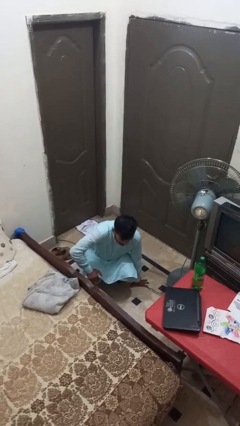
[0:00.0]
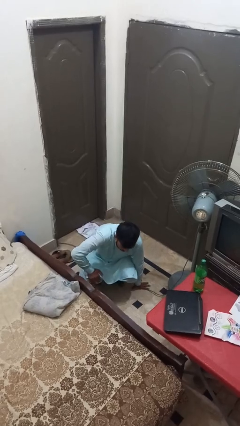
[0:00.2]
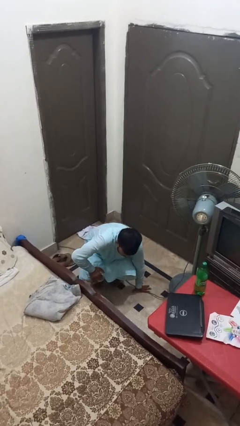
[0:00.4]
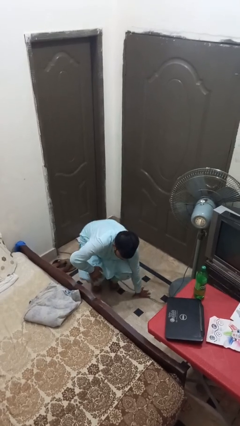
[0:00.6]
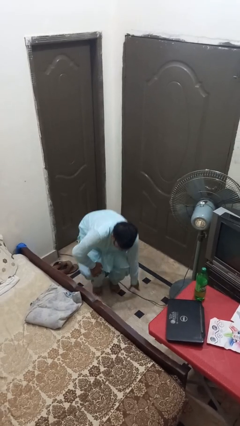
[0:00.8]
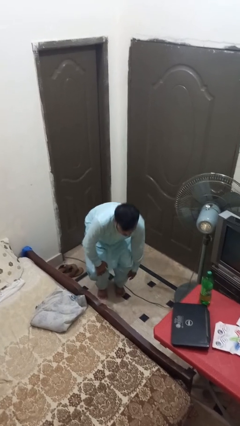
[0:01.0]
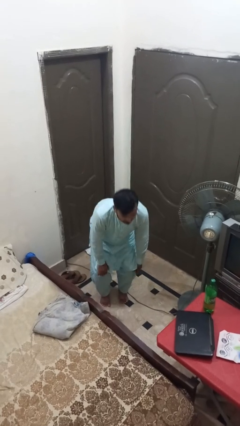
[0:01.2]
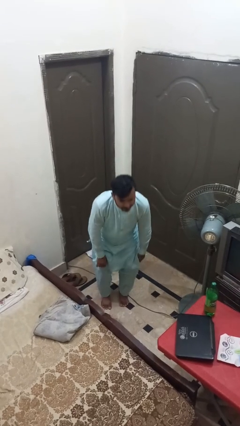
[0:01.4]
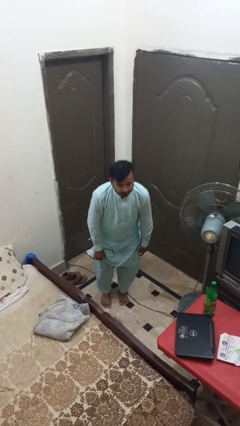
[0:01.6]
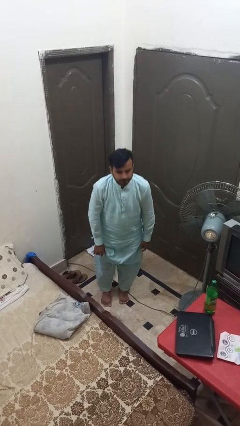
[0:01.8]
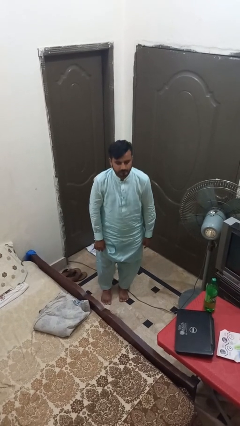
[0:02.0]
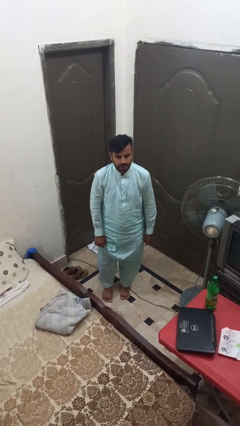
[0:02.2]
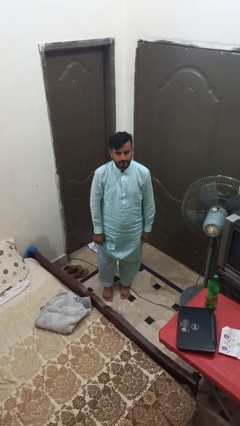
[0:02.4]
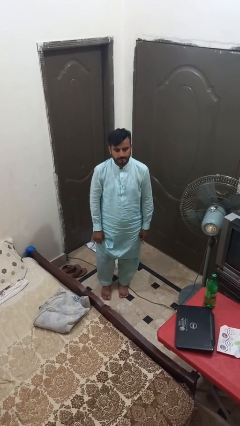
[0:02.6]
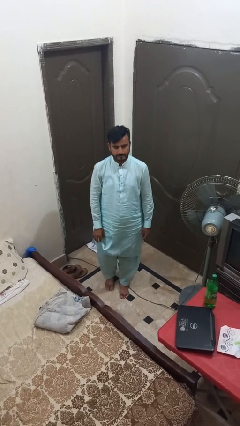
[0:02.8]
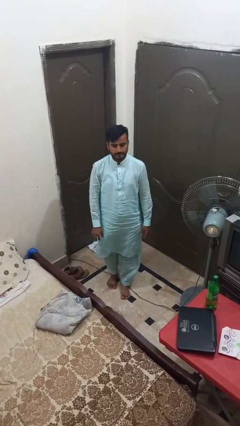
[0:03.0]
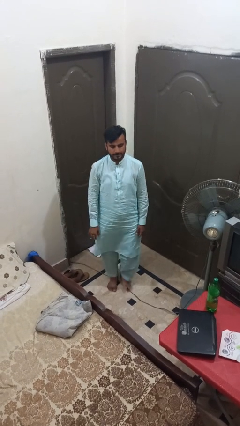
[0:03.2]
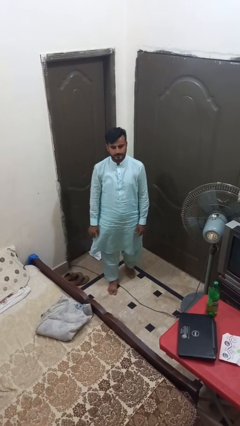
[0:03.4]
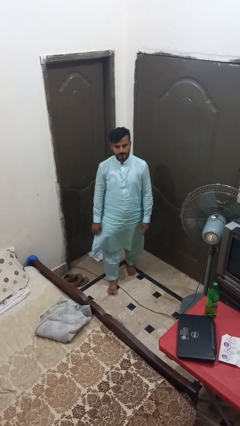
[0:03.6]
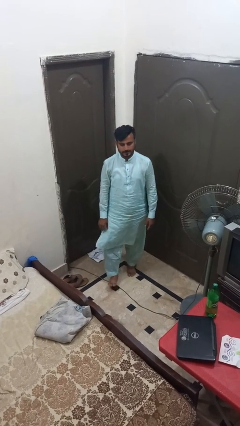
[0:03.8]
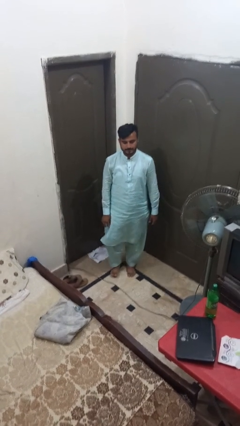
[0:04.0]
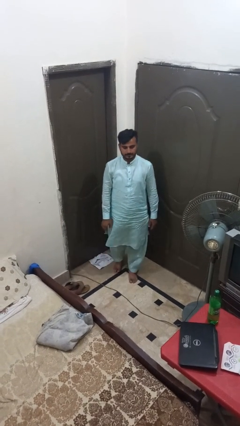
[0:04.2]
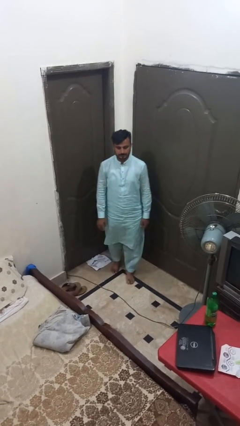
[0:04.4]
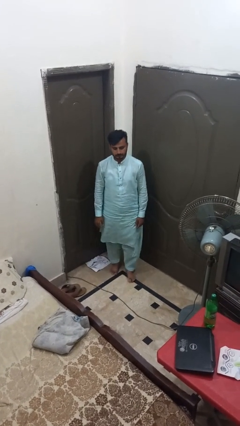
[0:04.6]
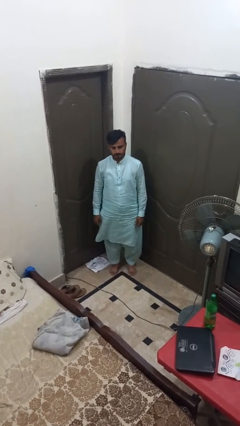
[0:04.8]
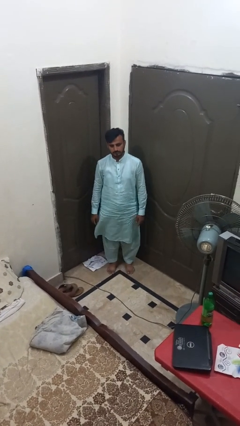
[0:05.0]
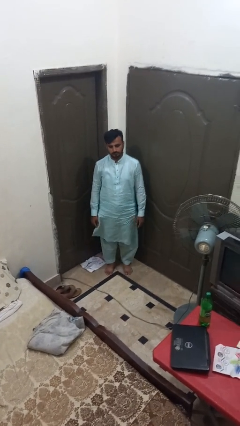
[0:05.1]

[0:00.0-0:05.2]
person stands up from floor

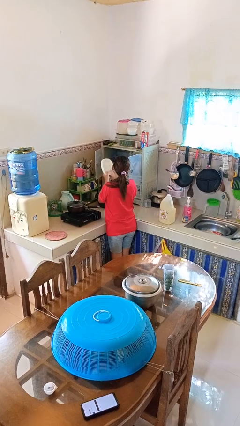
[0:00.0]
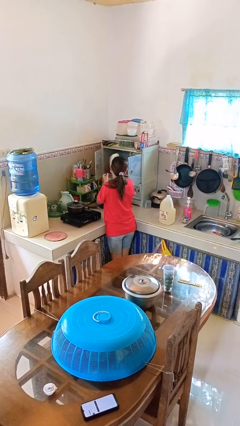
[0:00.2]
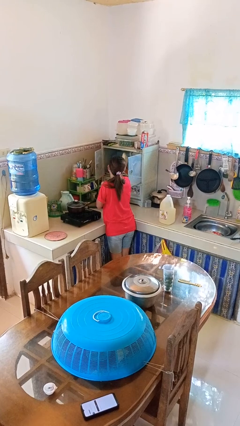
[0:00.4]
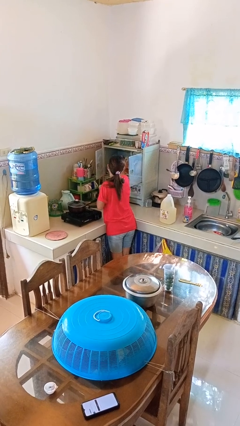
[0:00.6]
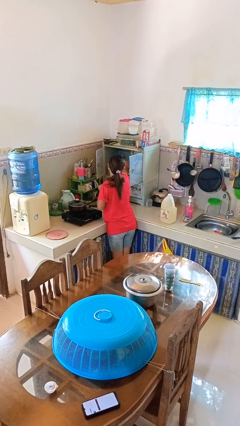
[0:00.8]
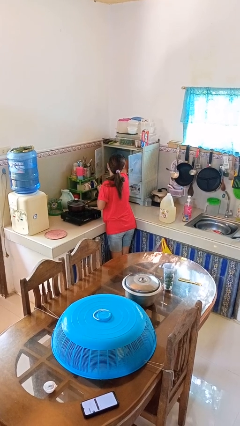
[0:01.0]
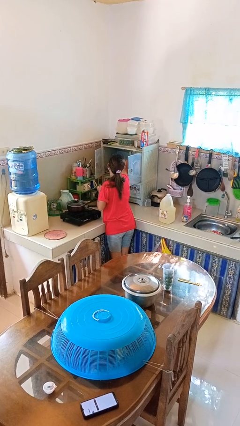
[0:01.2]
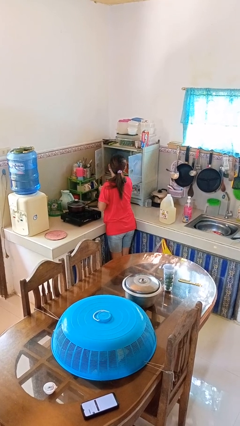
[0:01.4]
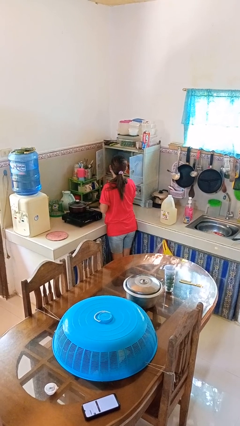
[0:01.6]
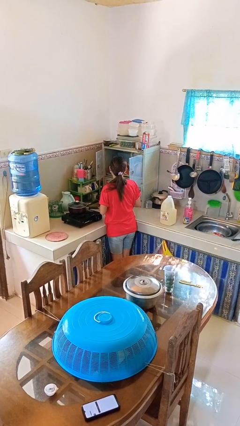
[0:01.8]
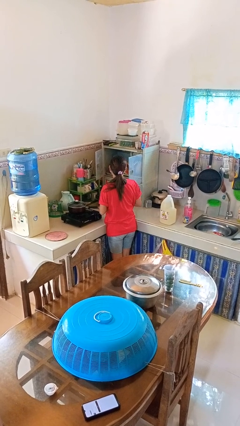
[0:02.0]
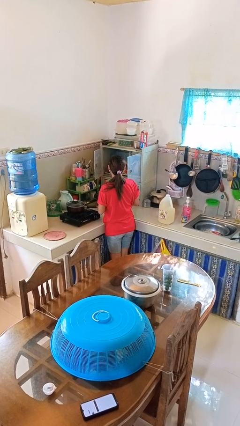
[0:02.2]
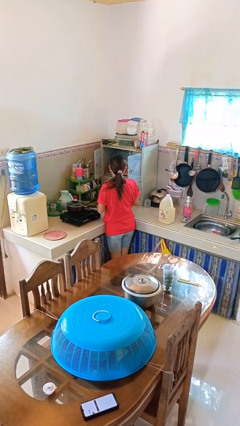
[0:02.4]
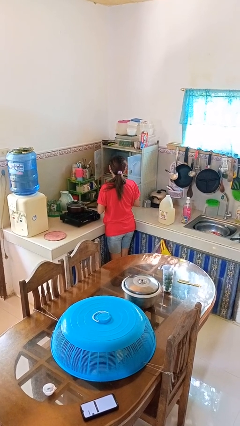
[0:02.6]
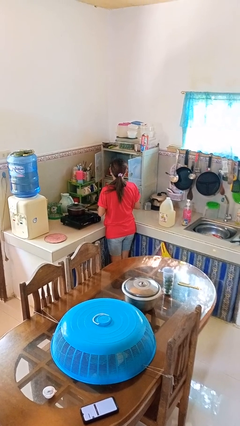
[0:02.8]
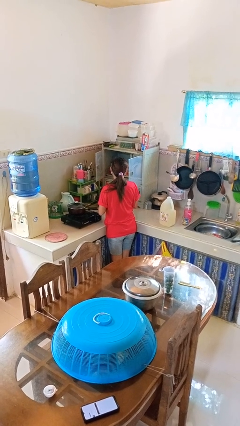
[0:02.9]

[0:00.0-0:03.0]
person puts object in cabinet

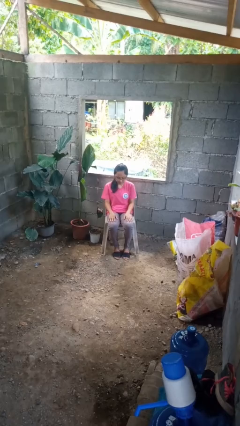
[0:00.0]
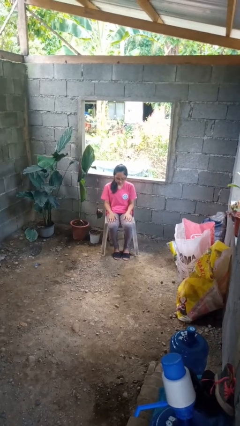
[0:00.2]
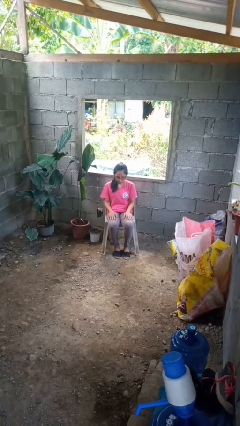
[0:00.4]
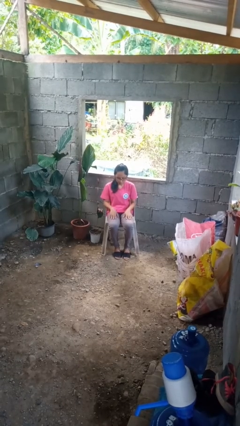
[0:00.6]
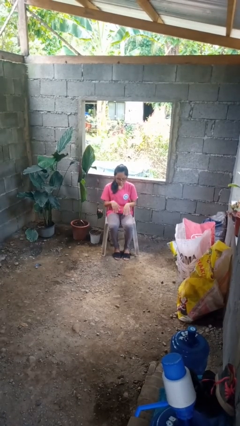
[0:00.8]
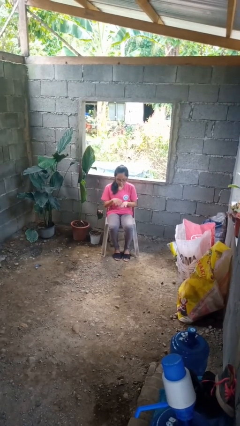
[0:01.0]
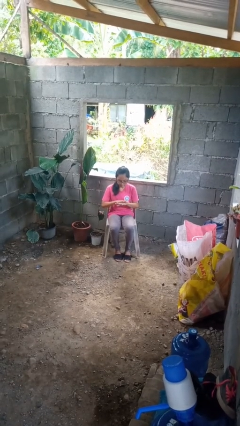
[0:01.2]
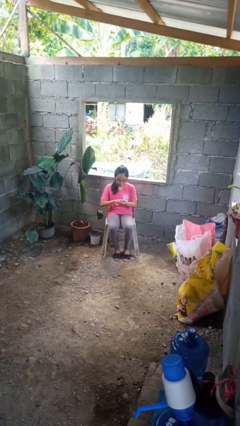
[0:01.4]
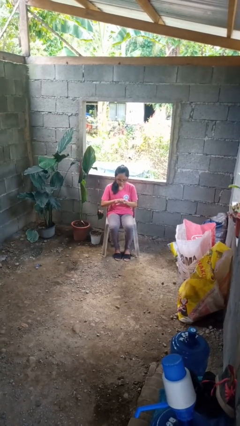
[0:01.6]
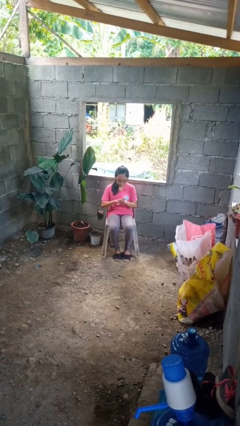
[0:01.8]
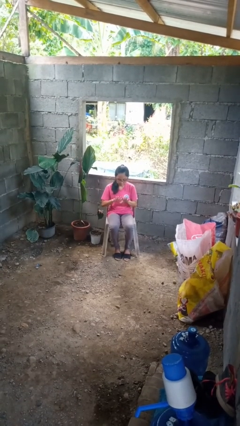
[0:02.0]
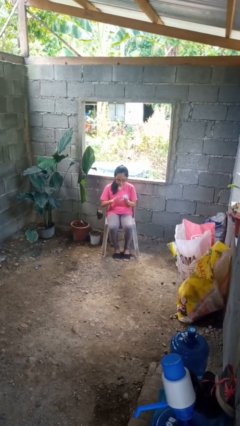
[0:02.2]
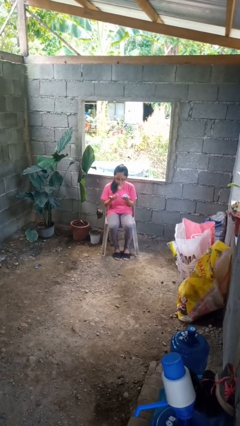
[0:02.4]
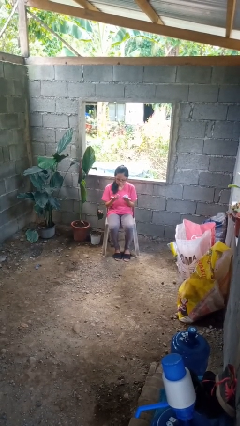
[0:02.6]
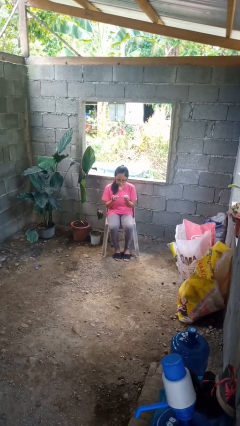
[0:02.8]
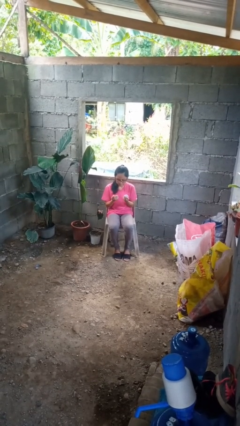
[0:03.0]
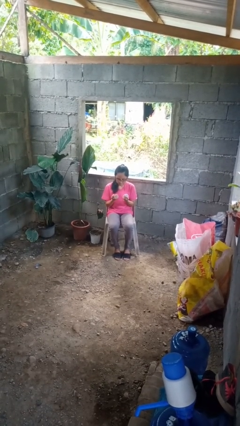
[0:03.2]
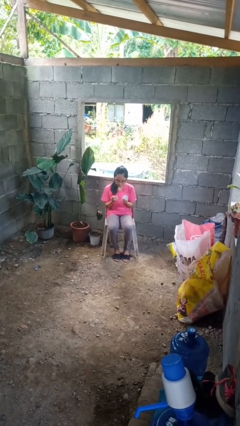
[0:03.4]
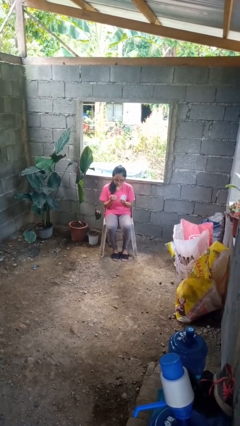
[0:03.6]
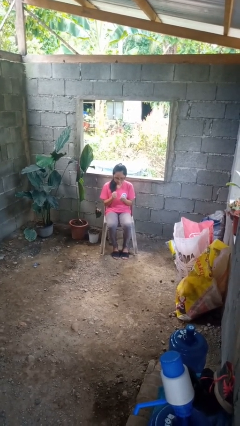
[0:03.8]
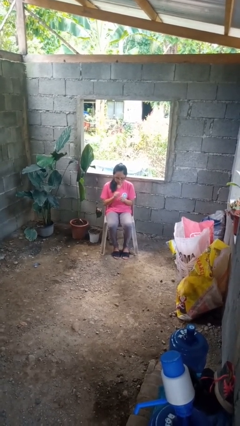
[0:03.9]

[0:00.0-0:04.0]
person looks at hands in lap

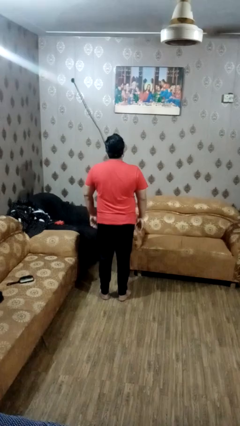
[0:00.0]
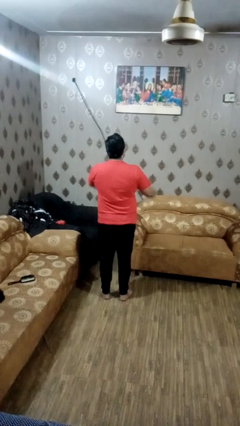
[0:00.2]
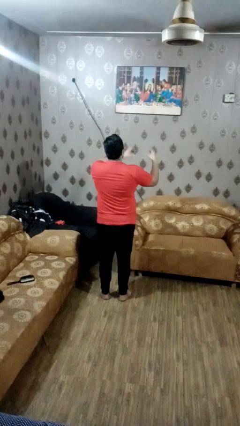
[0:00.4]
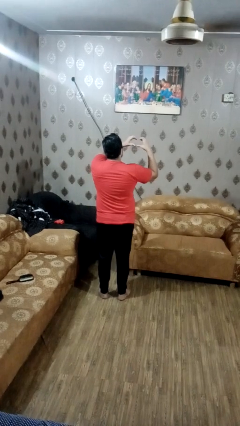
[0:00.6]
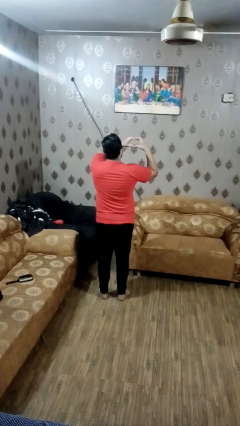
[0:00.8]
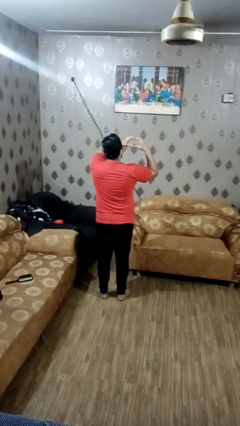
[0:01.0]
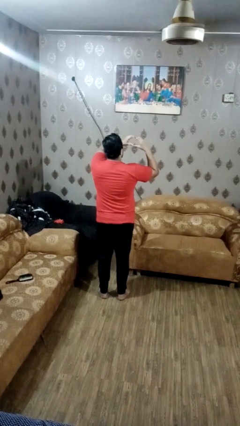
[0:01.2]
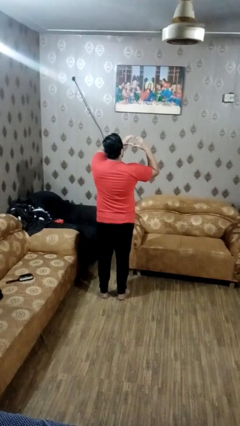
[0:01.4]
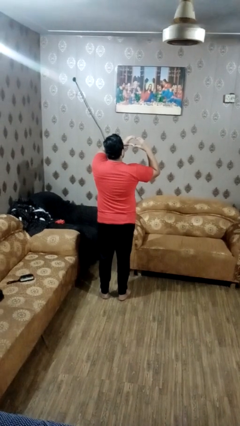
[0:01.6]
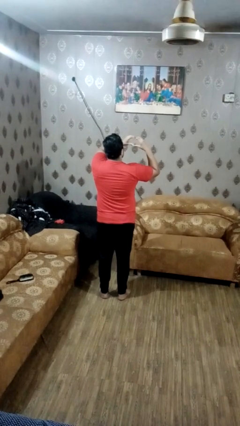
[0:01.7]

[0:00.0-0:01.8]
person gestures heart

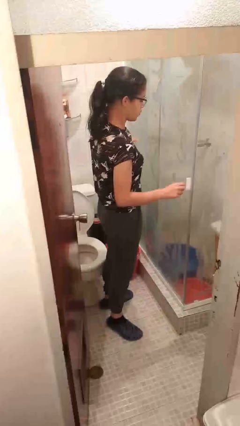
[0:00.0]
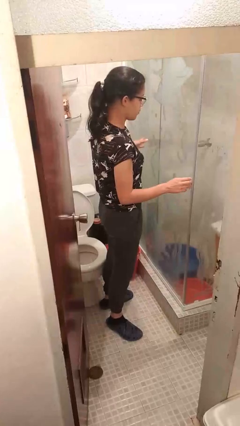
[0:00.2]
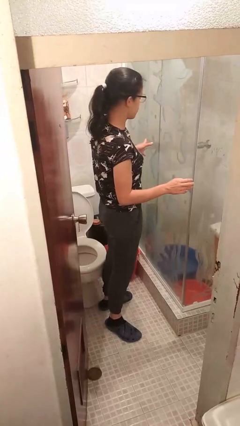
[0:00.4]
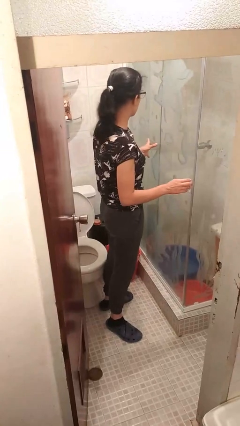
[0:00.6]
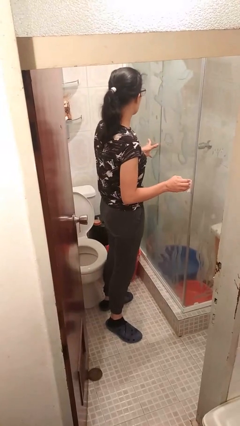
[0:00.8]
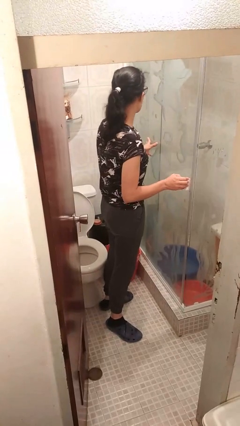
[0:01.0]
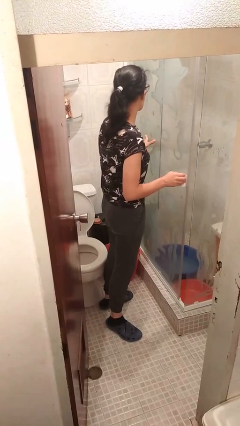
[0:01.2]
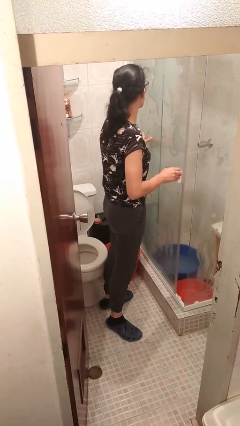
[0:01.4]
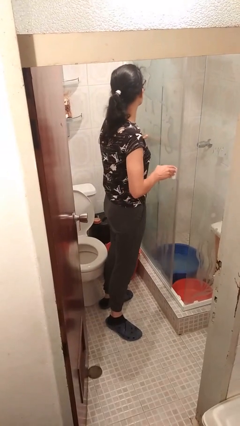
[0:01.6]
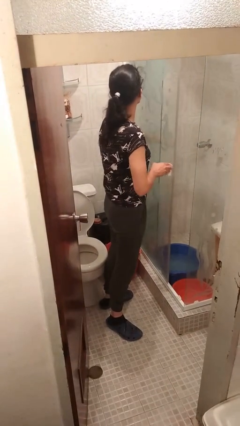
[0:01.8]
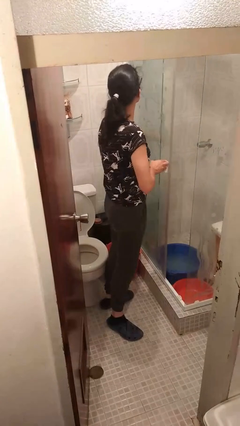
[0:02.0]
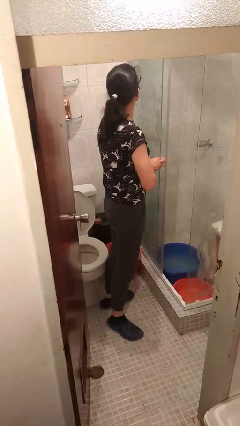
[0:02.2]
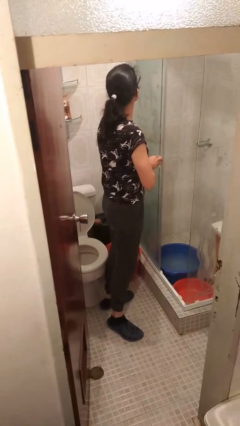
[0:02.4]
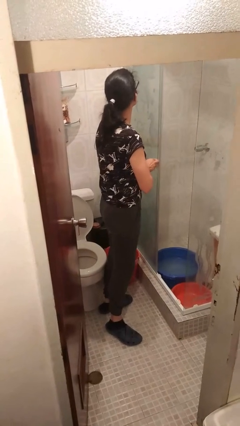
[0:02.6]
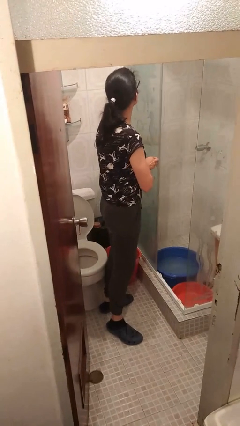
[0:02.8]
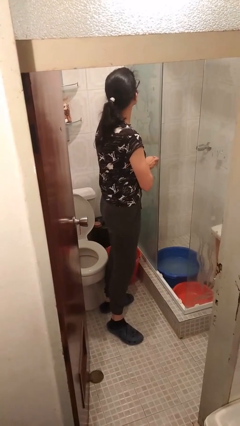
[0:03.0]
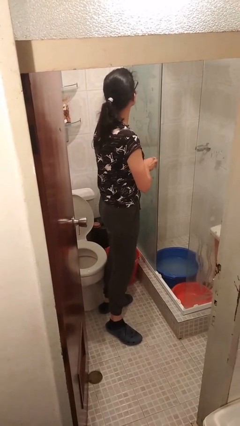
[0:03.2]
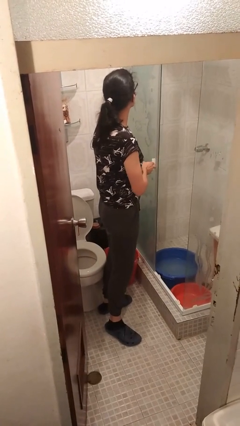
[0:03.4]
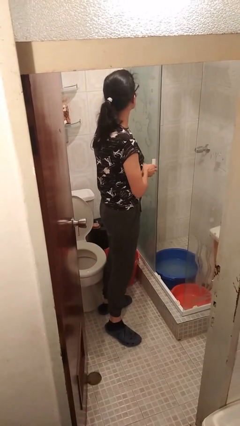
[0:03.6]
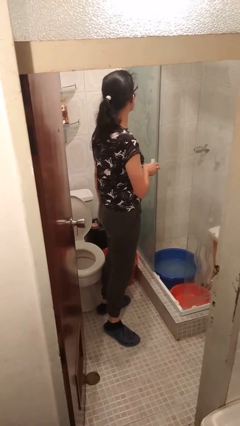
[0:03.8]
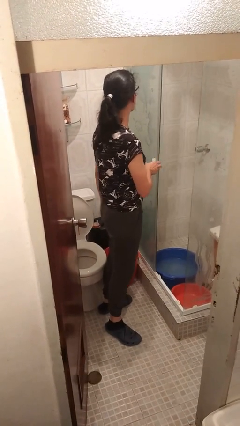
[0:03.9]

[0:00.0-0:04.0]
person opens sliding door
